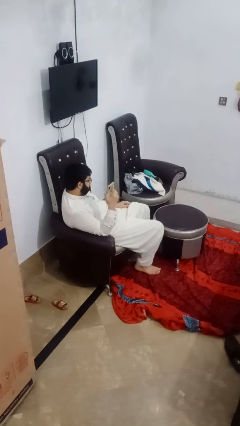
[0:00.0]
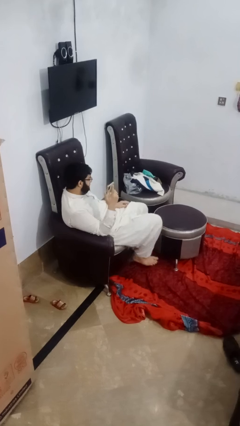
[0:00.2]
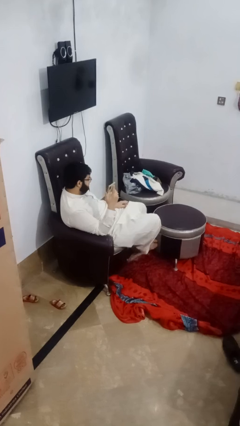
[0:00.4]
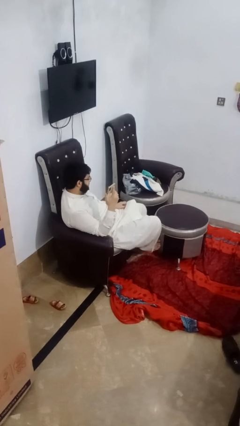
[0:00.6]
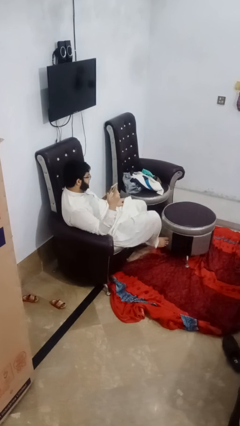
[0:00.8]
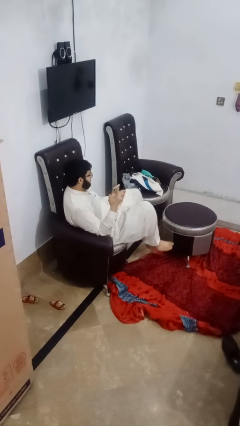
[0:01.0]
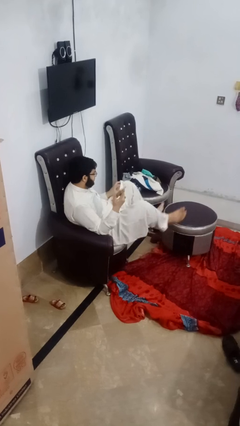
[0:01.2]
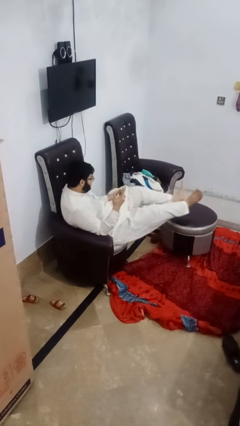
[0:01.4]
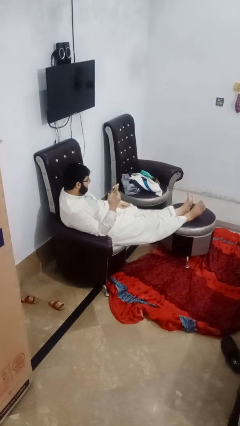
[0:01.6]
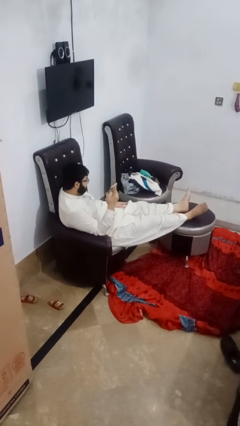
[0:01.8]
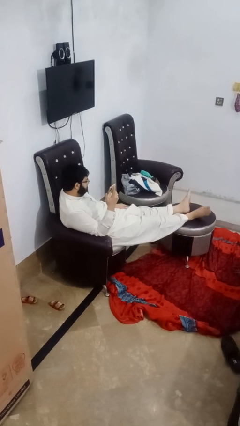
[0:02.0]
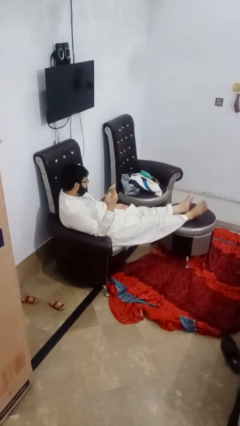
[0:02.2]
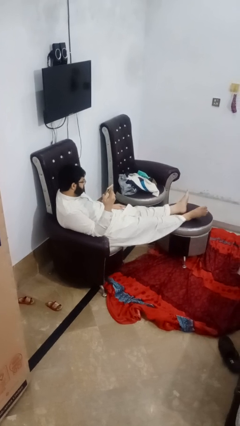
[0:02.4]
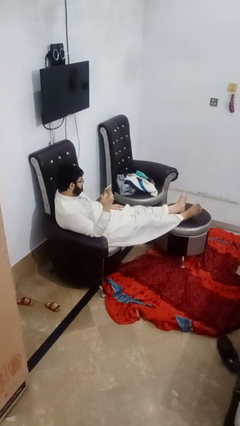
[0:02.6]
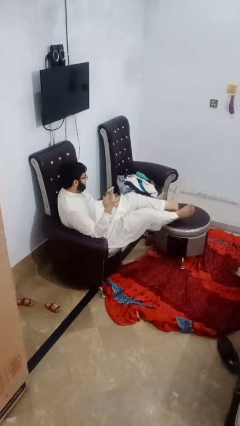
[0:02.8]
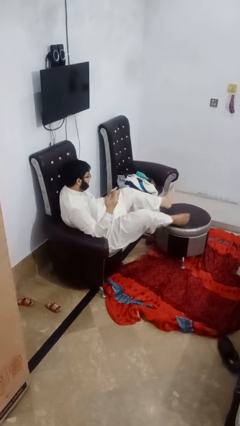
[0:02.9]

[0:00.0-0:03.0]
person puts feet up

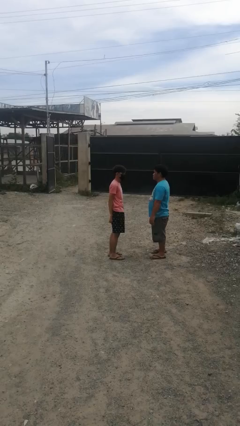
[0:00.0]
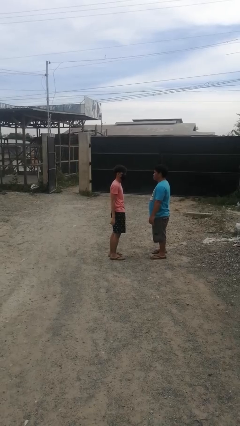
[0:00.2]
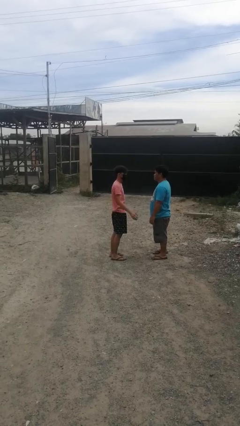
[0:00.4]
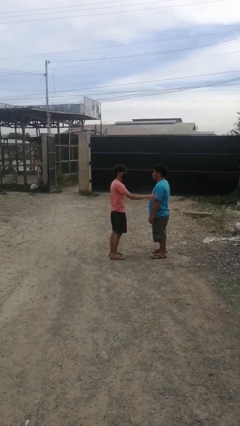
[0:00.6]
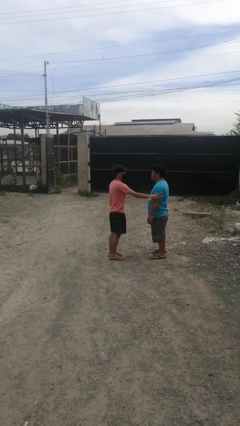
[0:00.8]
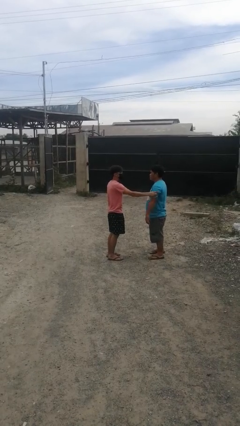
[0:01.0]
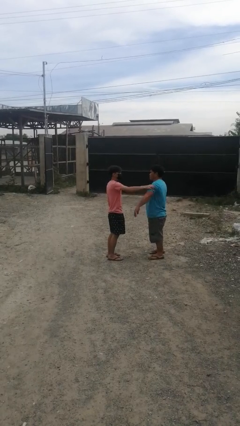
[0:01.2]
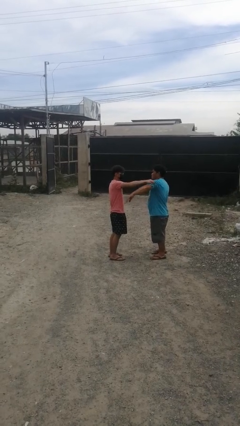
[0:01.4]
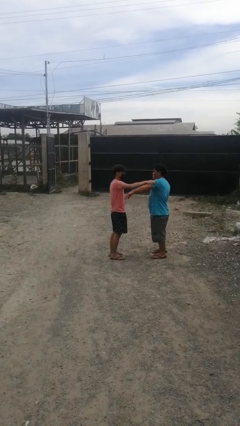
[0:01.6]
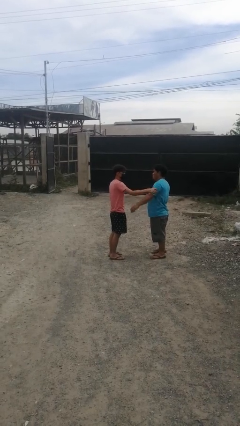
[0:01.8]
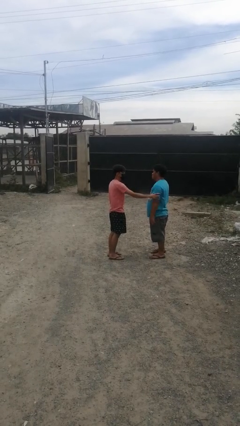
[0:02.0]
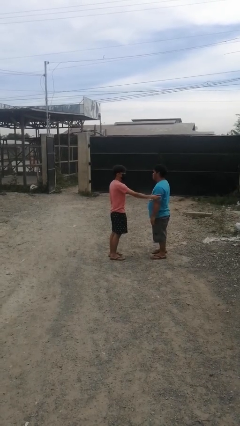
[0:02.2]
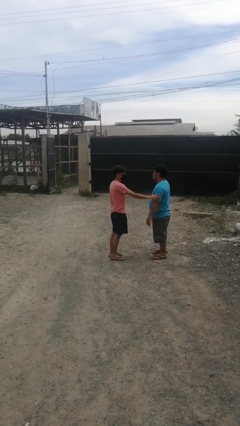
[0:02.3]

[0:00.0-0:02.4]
person grabs person by bicep

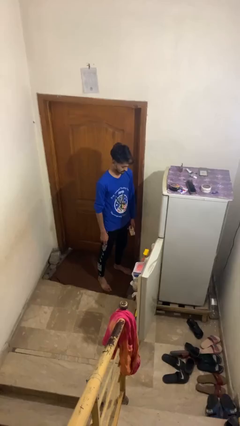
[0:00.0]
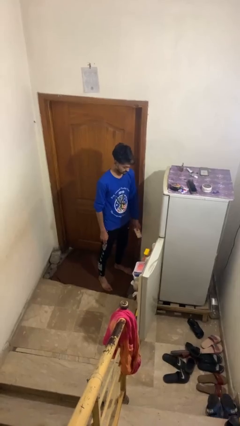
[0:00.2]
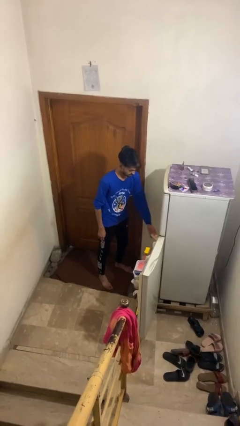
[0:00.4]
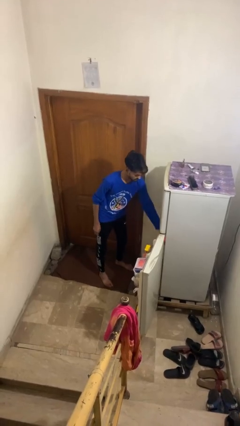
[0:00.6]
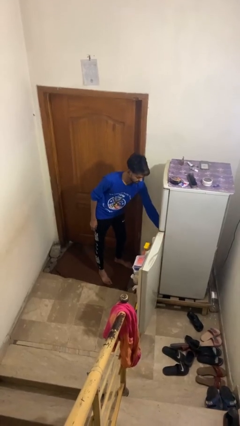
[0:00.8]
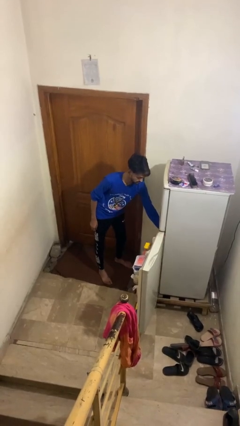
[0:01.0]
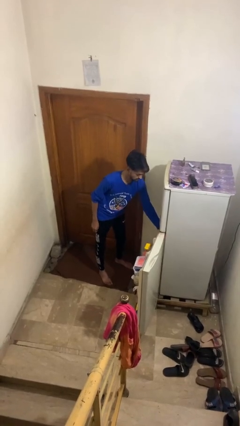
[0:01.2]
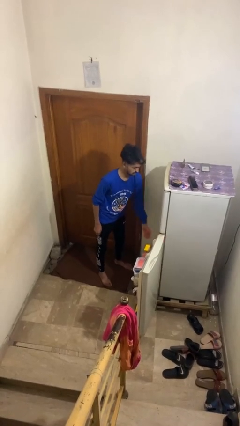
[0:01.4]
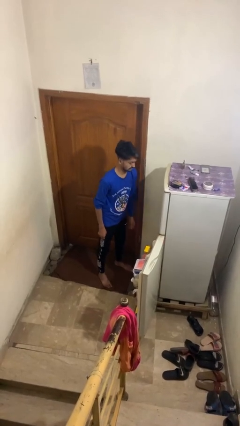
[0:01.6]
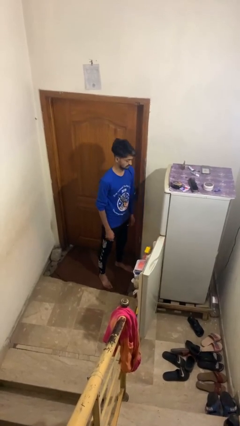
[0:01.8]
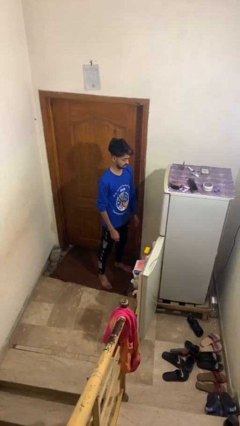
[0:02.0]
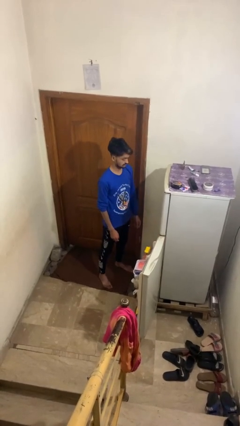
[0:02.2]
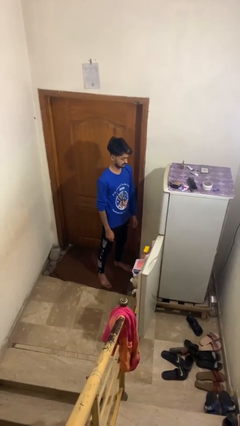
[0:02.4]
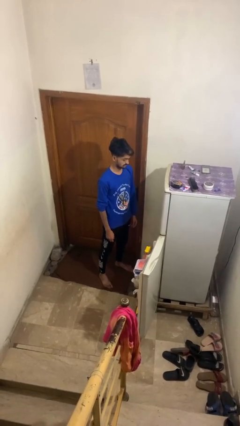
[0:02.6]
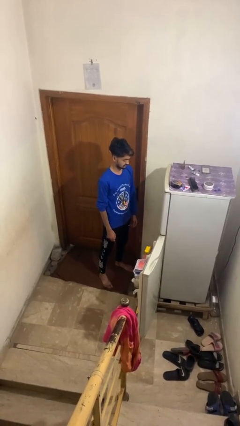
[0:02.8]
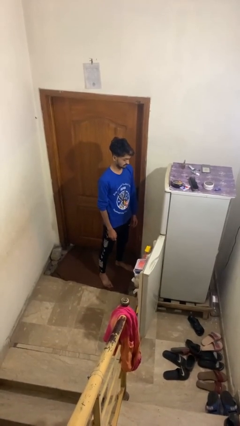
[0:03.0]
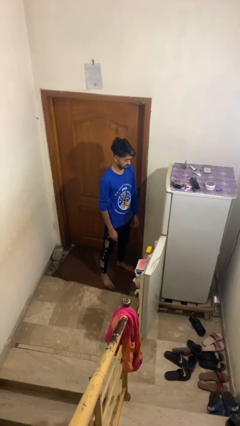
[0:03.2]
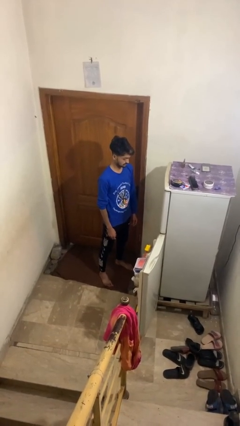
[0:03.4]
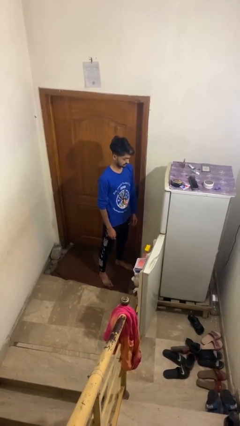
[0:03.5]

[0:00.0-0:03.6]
person puts object into refrigerator

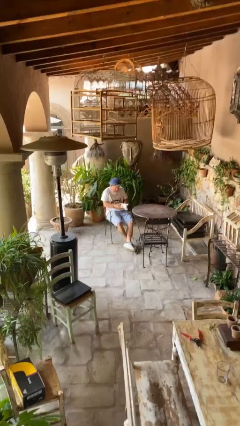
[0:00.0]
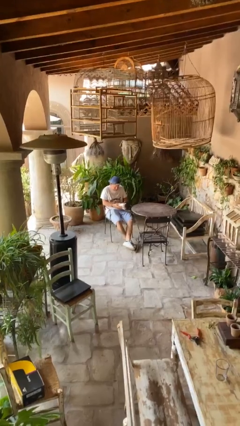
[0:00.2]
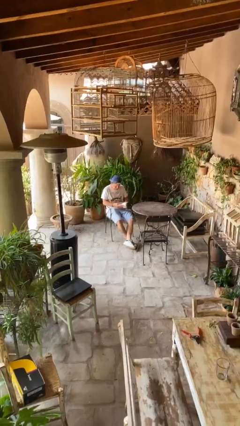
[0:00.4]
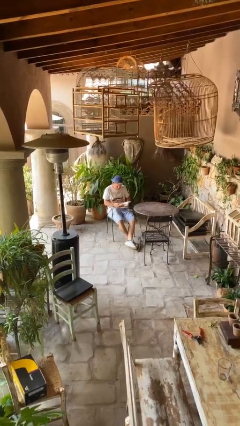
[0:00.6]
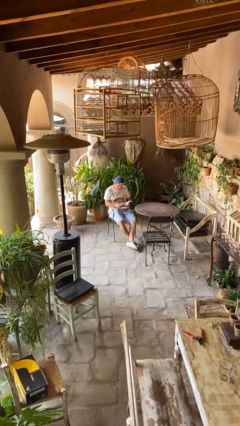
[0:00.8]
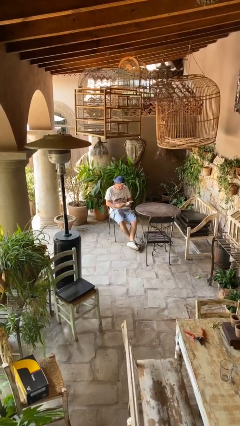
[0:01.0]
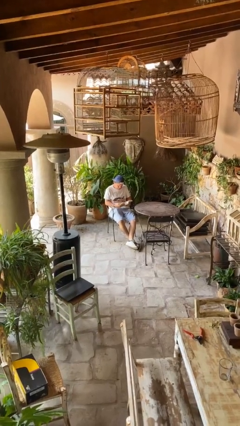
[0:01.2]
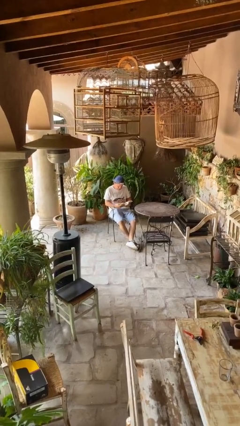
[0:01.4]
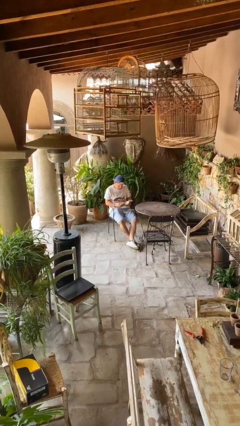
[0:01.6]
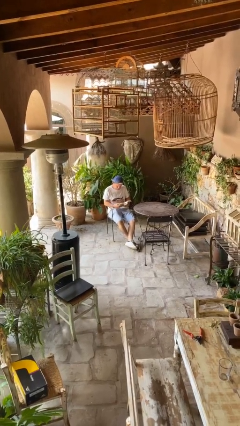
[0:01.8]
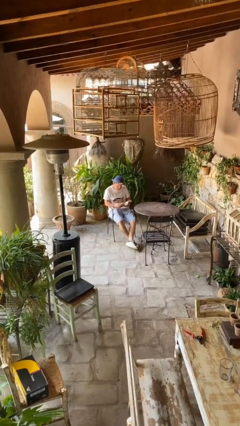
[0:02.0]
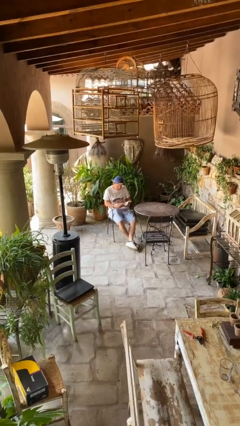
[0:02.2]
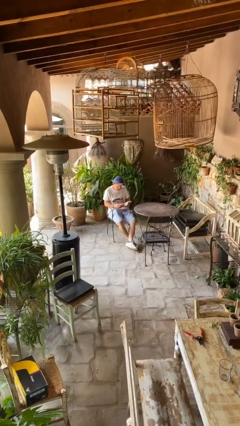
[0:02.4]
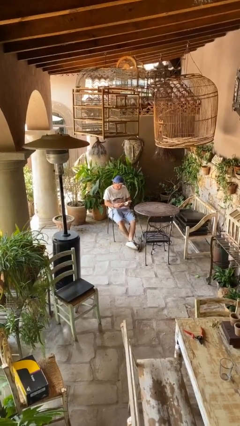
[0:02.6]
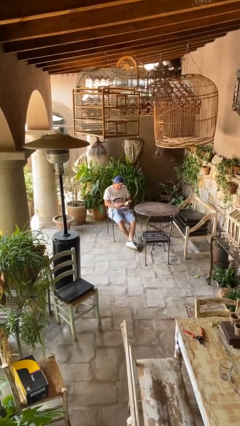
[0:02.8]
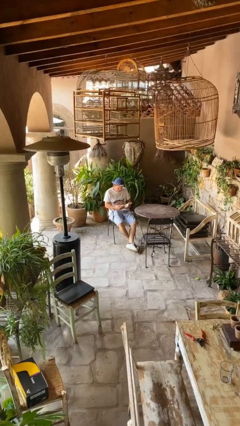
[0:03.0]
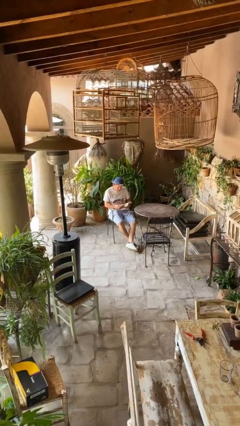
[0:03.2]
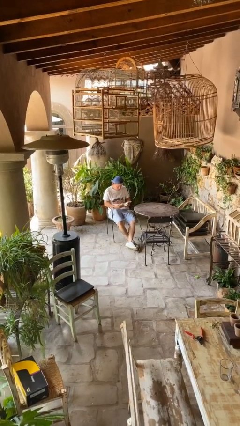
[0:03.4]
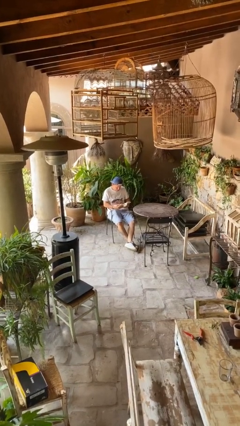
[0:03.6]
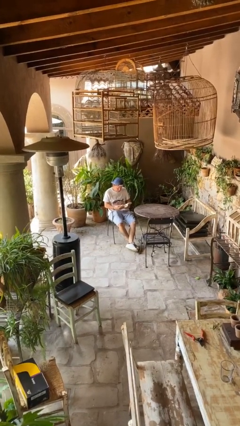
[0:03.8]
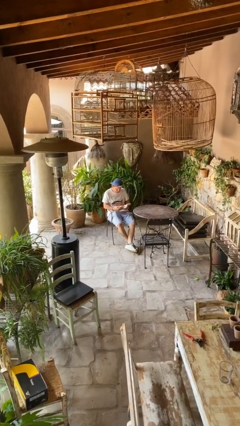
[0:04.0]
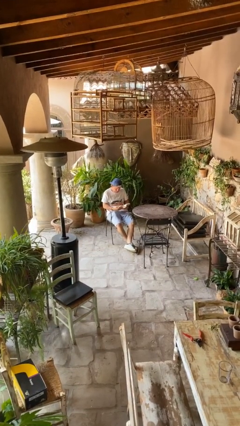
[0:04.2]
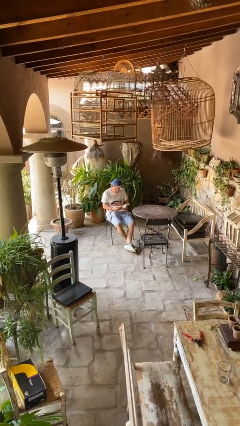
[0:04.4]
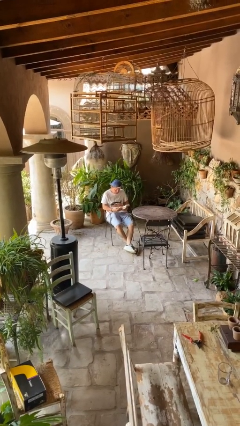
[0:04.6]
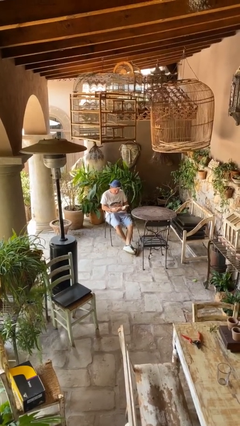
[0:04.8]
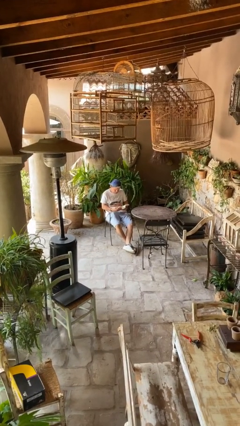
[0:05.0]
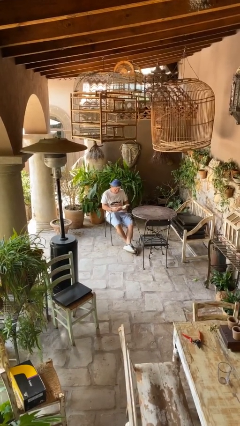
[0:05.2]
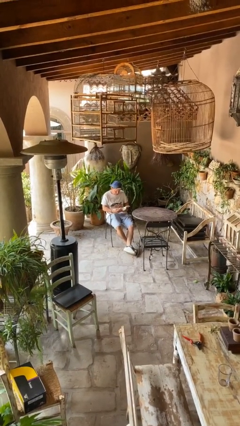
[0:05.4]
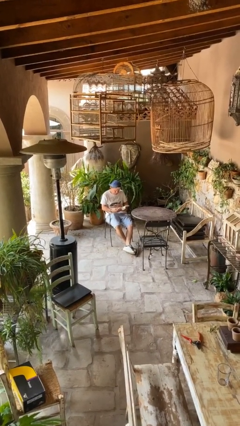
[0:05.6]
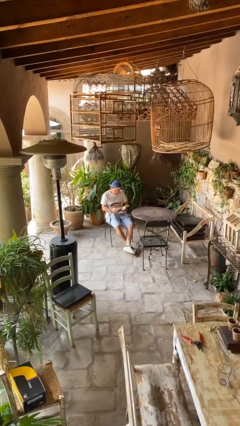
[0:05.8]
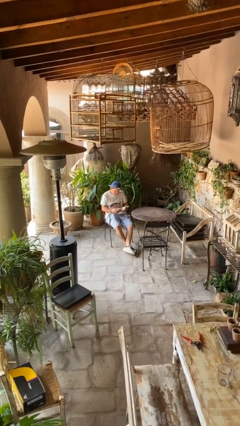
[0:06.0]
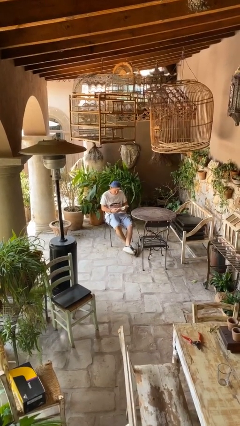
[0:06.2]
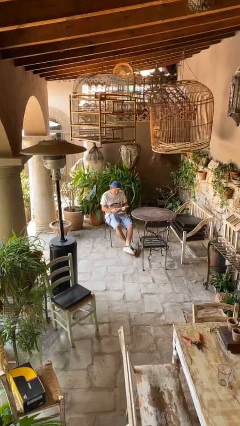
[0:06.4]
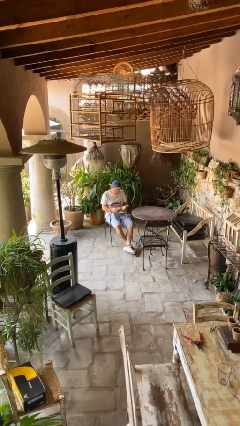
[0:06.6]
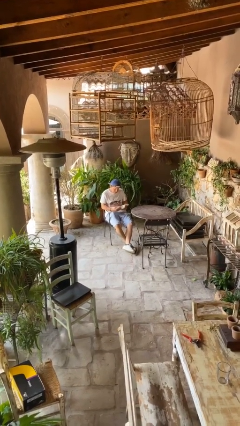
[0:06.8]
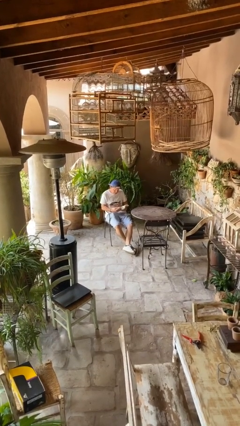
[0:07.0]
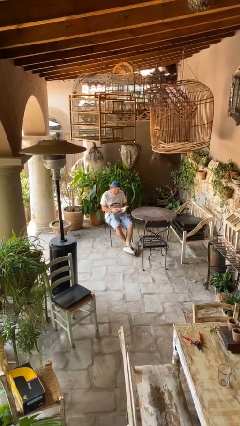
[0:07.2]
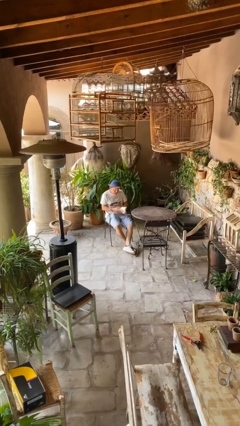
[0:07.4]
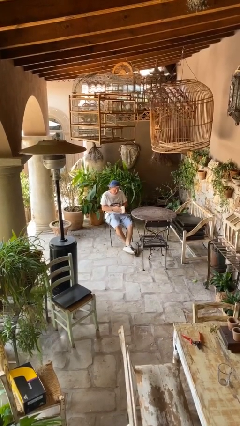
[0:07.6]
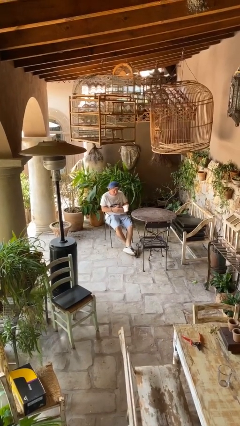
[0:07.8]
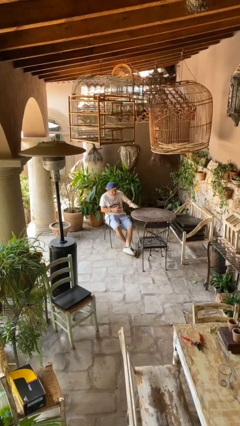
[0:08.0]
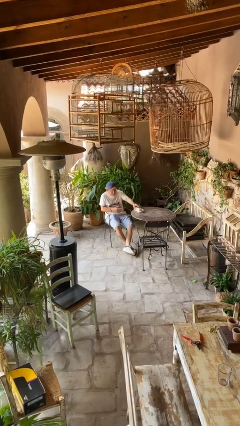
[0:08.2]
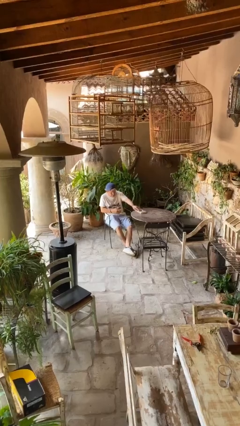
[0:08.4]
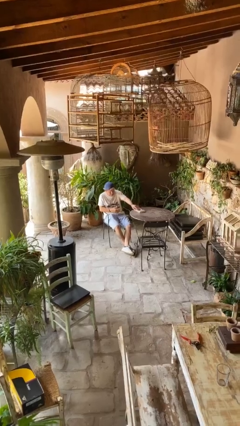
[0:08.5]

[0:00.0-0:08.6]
person reads document

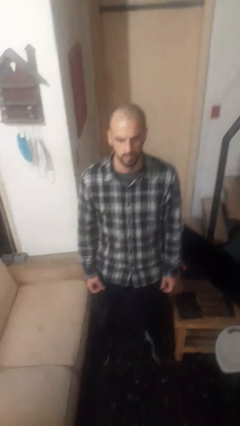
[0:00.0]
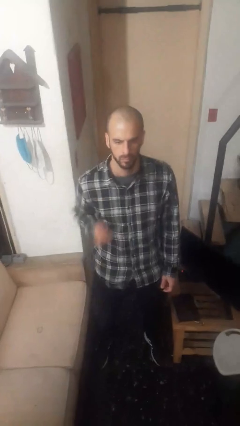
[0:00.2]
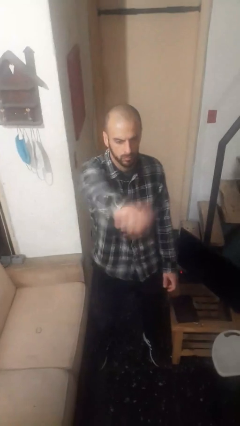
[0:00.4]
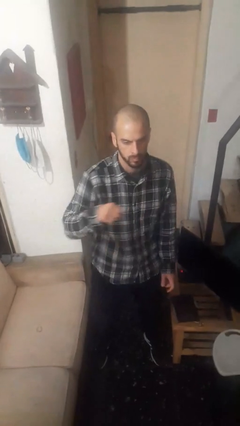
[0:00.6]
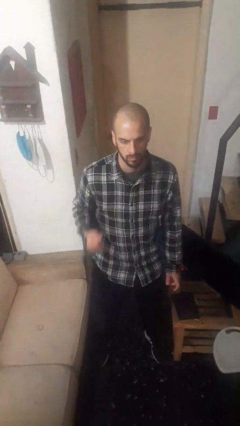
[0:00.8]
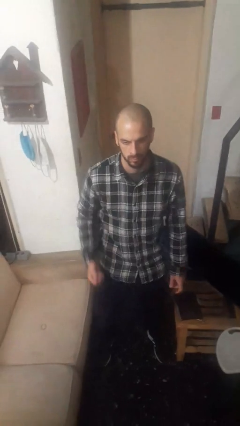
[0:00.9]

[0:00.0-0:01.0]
person punches
